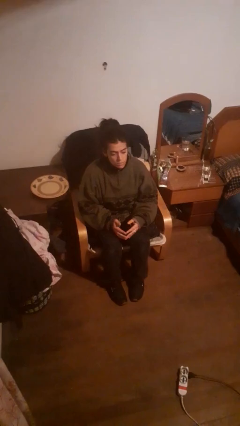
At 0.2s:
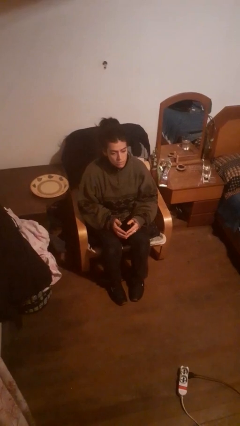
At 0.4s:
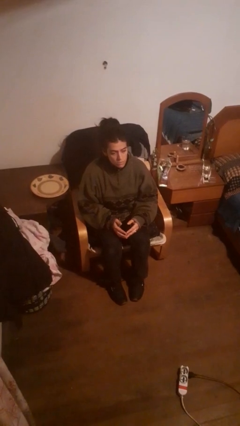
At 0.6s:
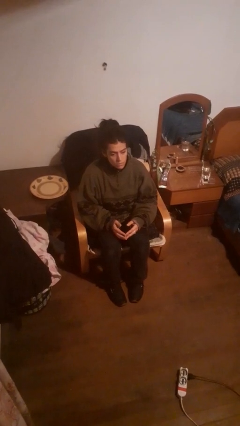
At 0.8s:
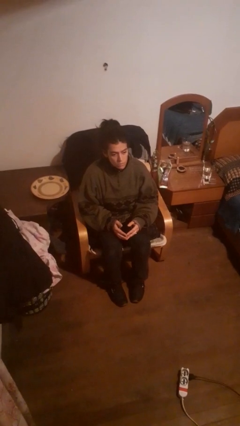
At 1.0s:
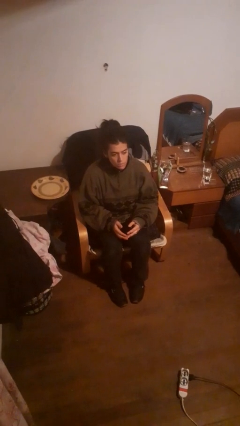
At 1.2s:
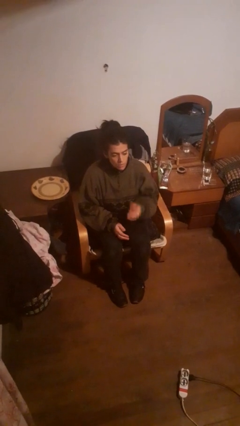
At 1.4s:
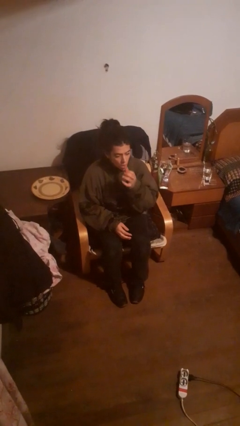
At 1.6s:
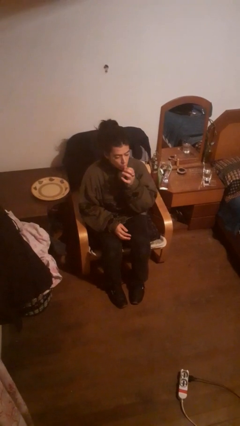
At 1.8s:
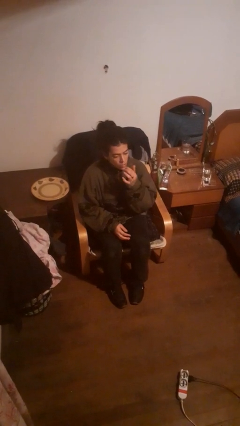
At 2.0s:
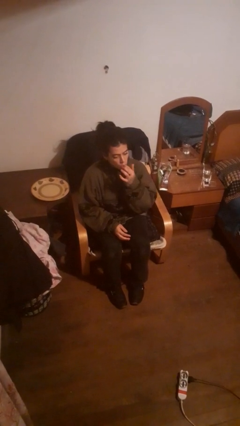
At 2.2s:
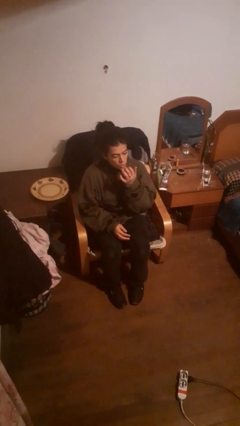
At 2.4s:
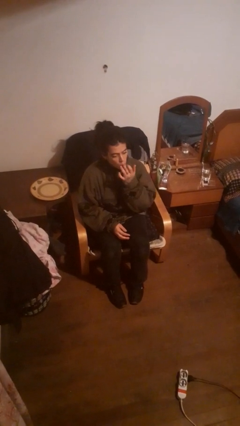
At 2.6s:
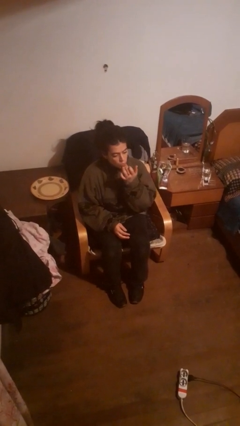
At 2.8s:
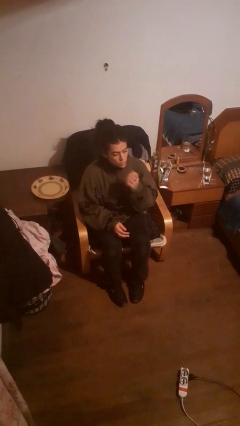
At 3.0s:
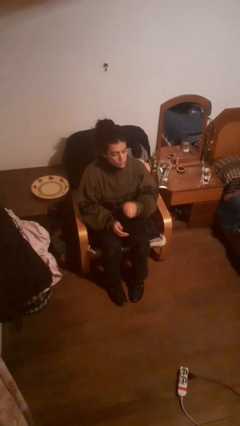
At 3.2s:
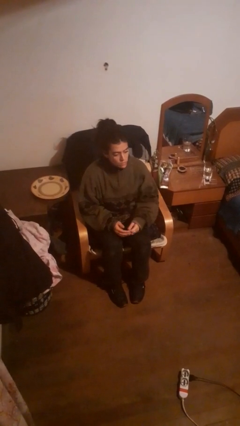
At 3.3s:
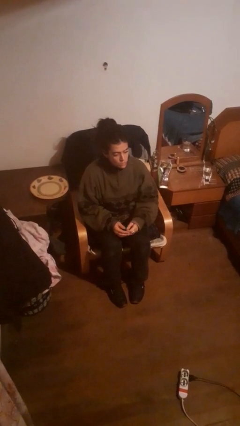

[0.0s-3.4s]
person licks fingers

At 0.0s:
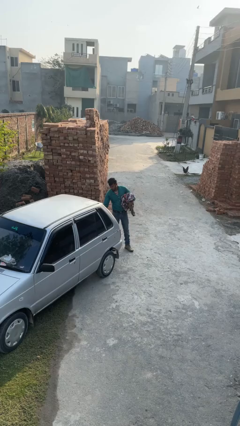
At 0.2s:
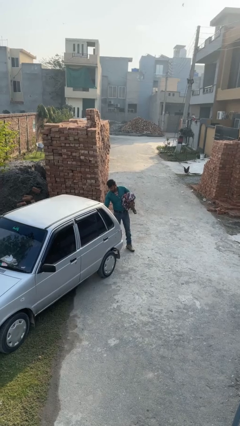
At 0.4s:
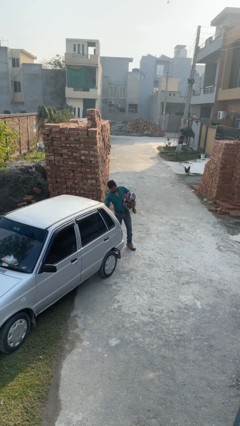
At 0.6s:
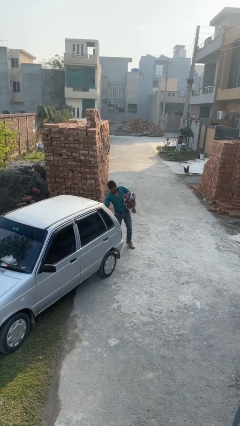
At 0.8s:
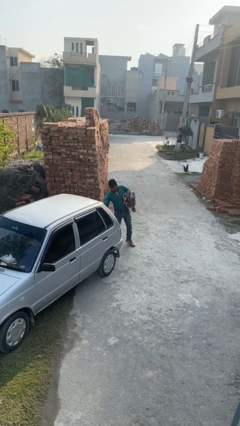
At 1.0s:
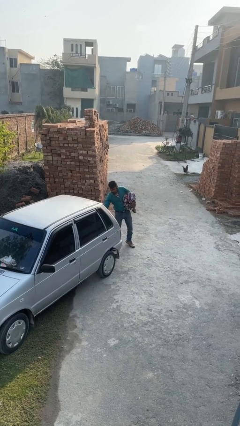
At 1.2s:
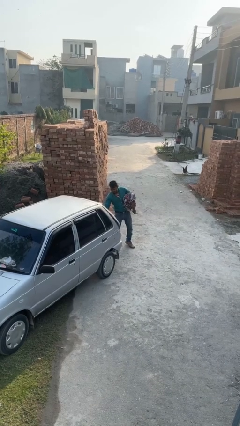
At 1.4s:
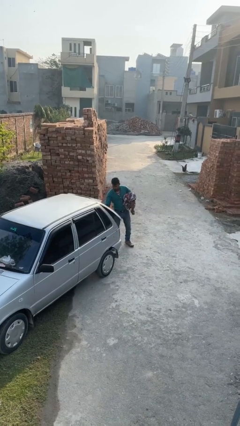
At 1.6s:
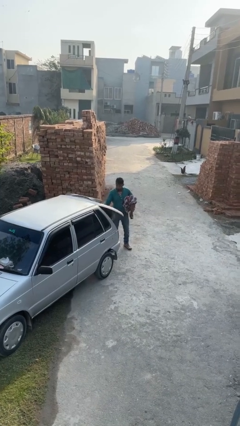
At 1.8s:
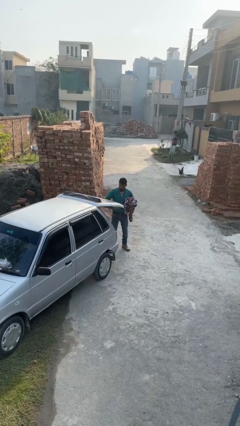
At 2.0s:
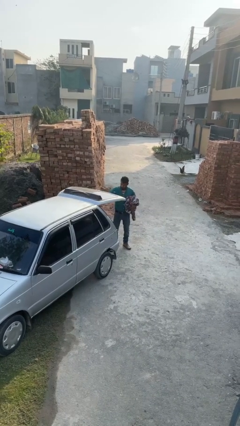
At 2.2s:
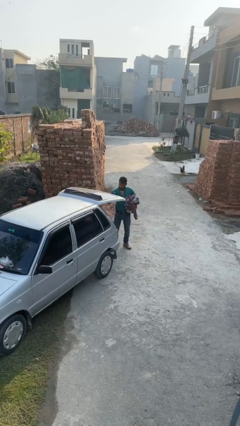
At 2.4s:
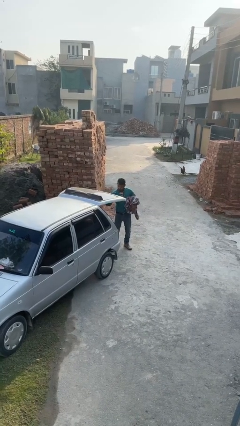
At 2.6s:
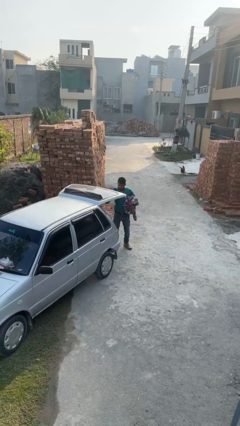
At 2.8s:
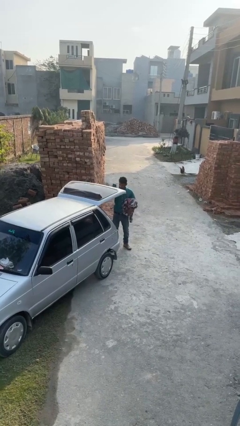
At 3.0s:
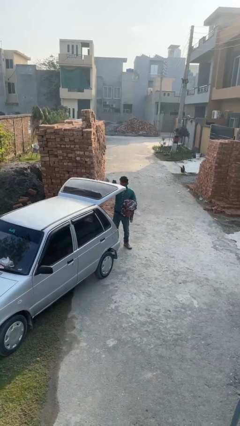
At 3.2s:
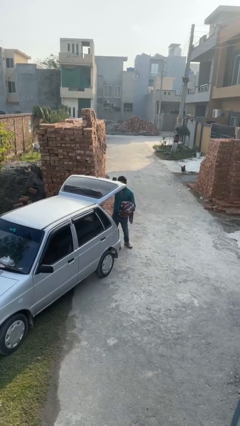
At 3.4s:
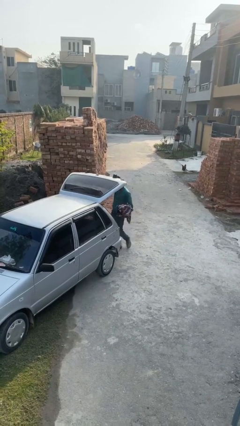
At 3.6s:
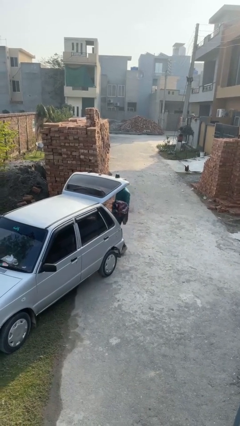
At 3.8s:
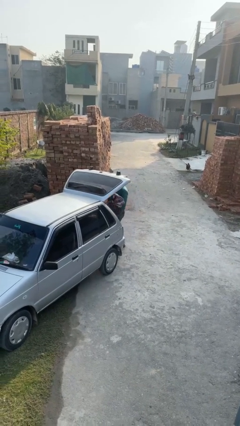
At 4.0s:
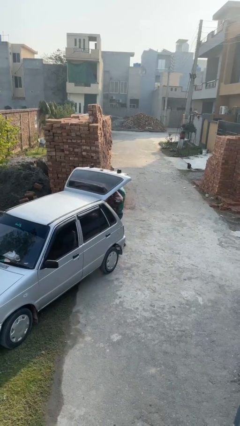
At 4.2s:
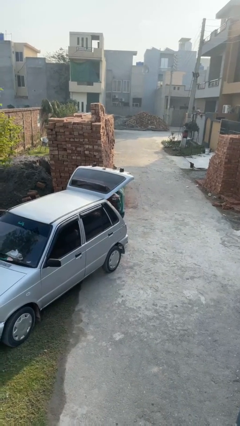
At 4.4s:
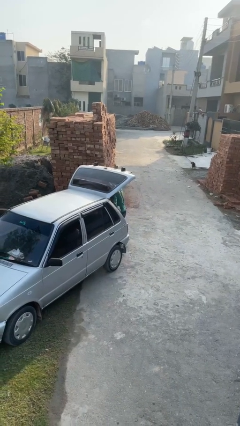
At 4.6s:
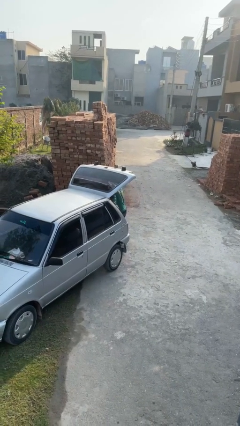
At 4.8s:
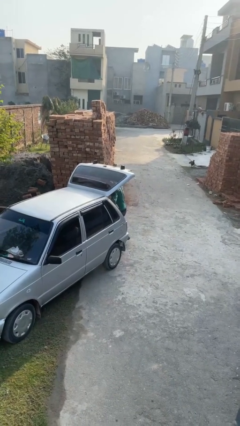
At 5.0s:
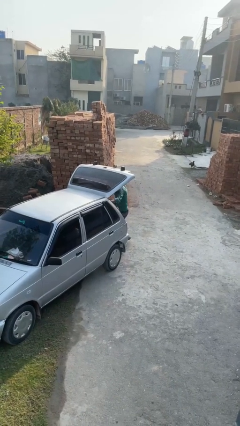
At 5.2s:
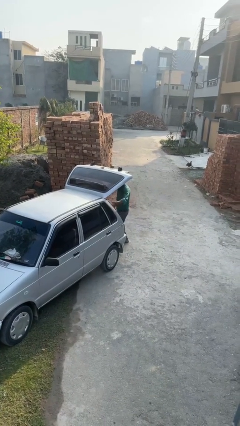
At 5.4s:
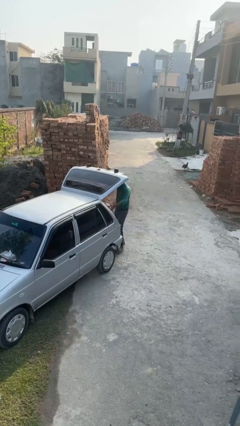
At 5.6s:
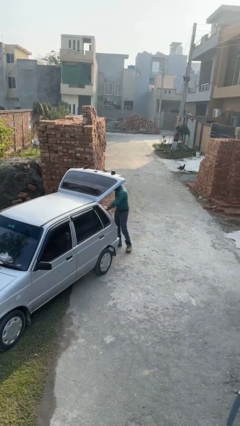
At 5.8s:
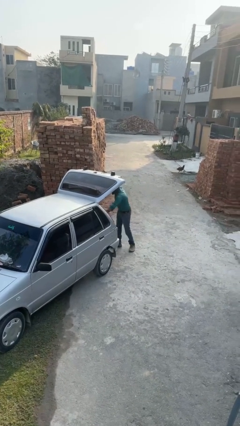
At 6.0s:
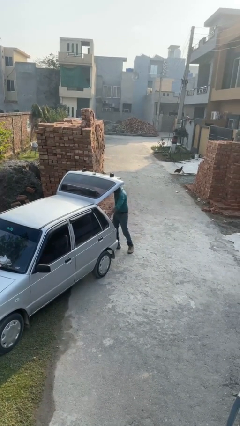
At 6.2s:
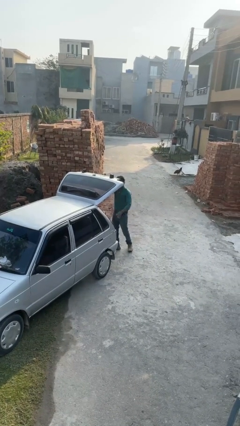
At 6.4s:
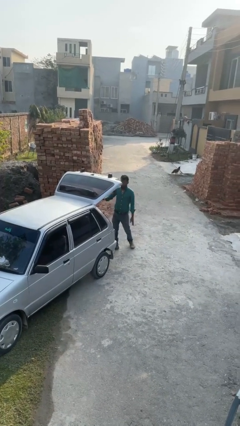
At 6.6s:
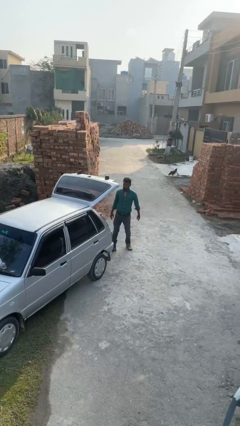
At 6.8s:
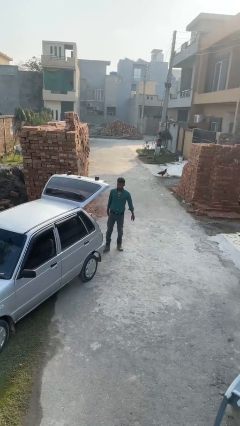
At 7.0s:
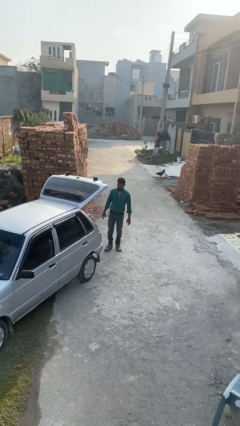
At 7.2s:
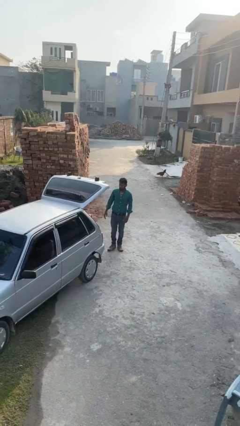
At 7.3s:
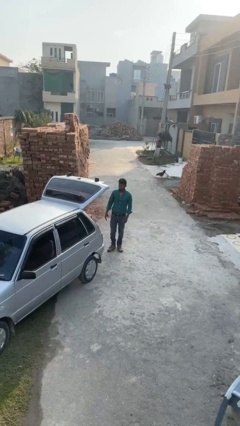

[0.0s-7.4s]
person loads car

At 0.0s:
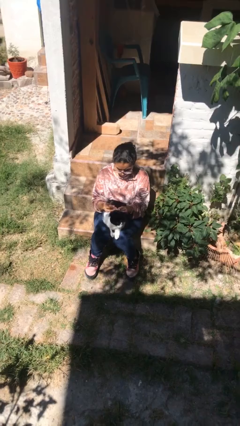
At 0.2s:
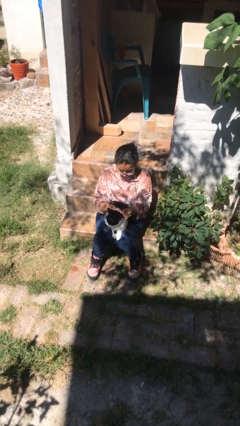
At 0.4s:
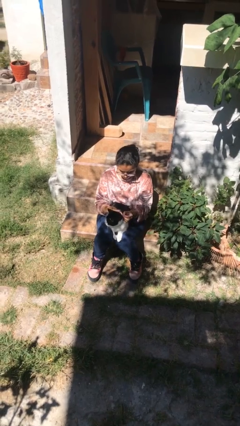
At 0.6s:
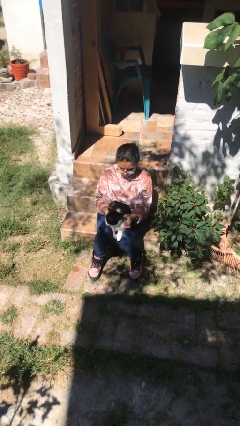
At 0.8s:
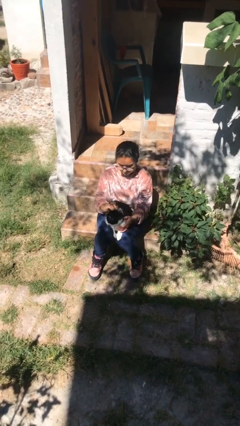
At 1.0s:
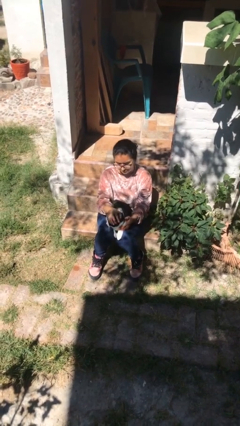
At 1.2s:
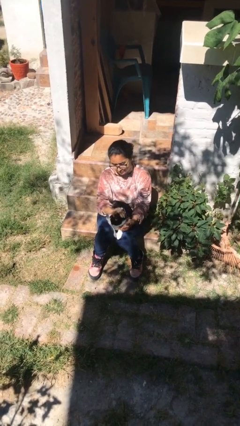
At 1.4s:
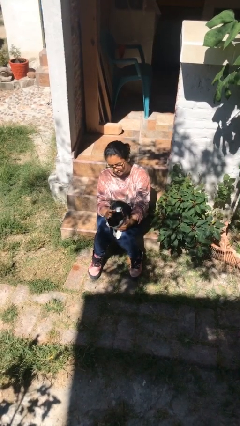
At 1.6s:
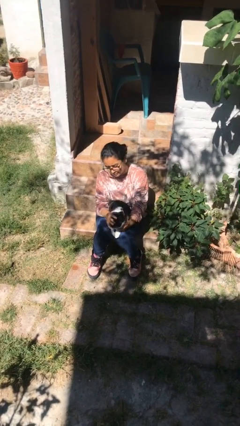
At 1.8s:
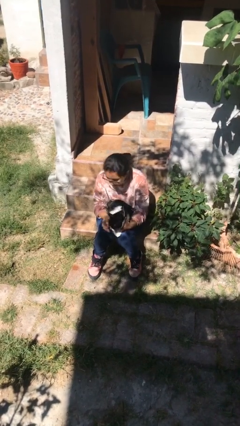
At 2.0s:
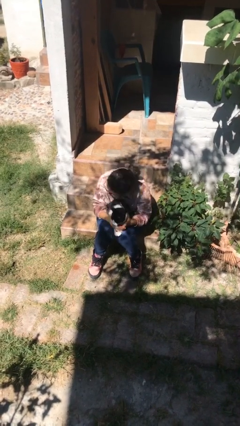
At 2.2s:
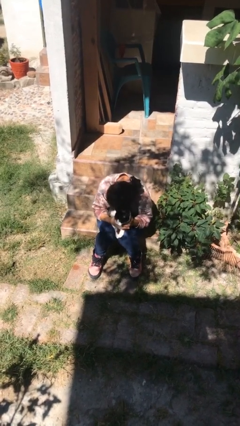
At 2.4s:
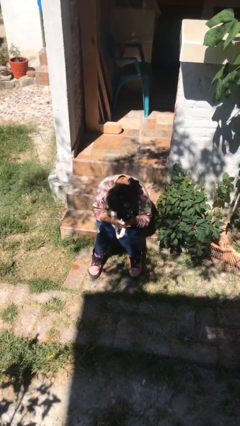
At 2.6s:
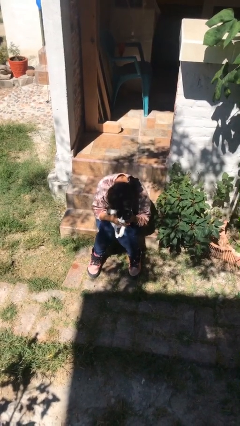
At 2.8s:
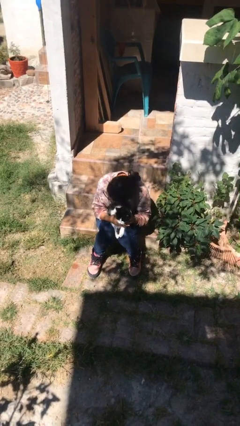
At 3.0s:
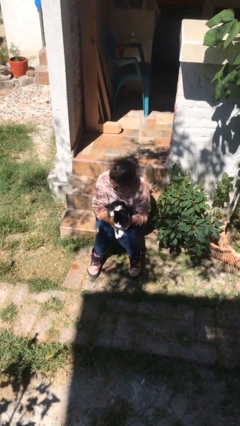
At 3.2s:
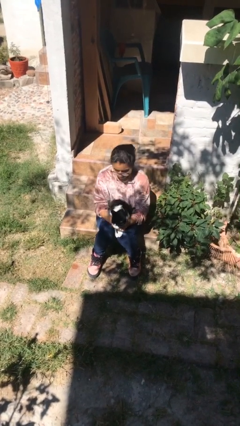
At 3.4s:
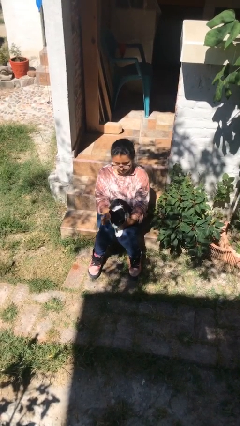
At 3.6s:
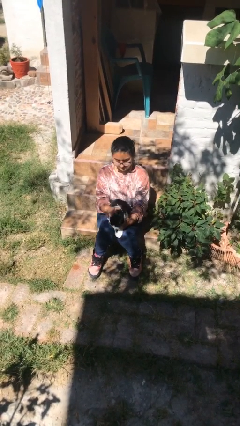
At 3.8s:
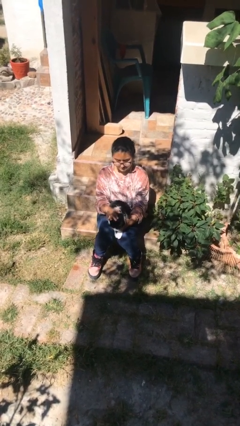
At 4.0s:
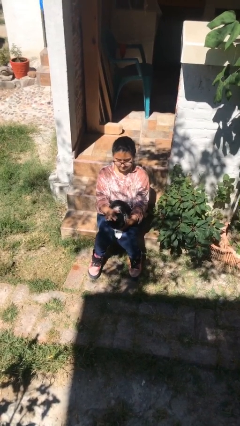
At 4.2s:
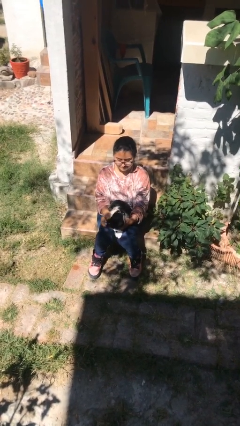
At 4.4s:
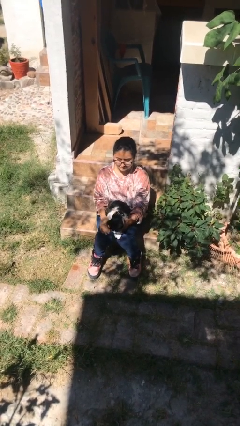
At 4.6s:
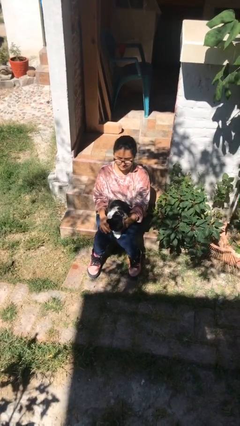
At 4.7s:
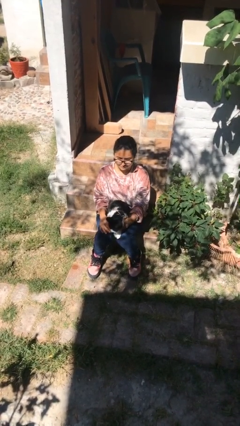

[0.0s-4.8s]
person hugs cat

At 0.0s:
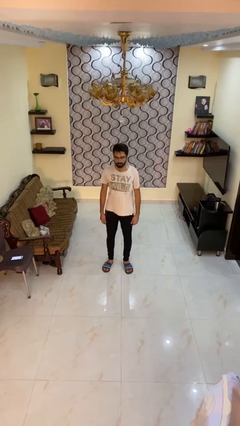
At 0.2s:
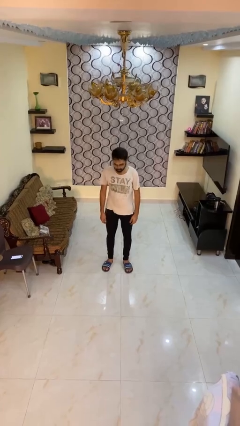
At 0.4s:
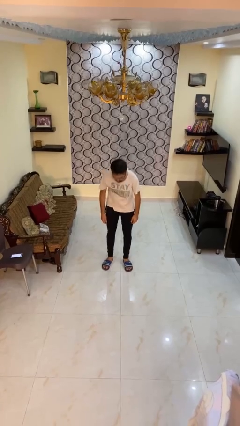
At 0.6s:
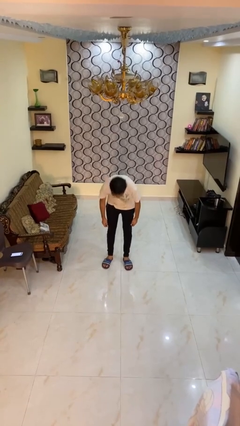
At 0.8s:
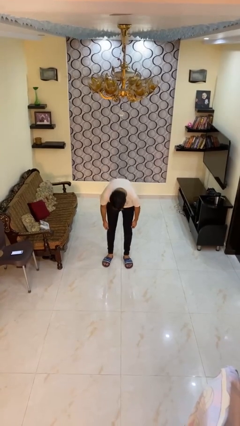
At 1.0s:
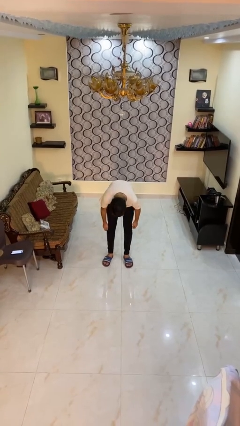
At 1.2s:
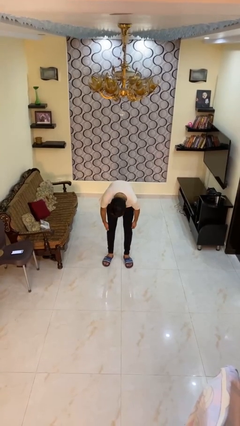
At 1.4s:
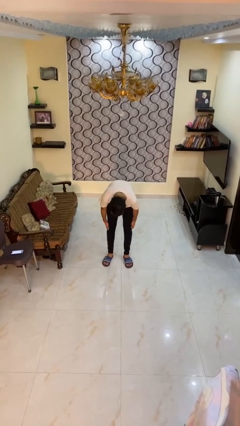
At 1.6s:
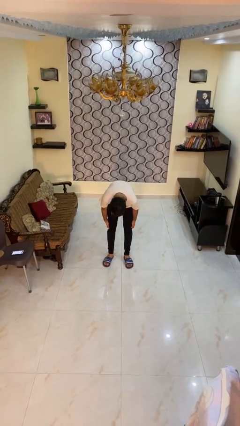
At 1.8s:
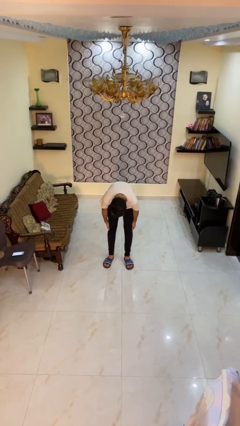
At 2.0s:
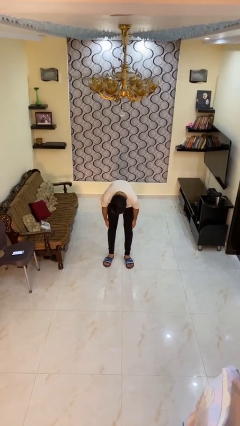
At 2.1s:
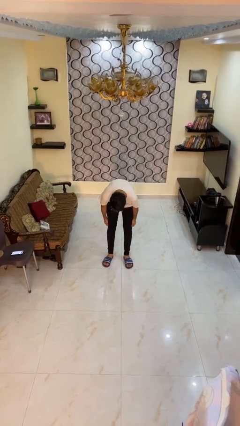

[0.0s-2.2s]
person bows
